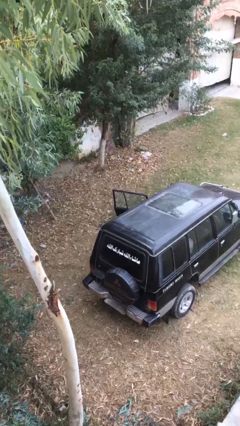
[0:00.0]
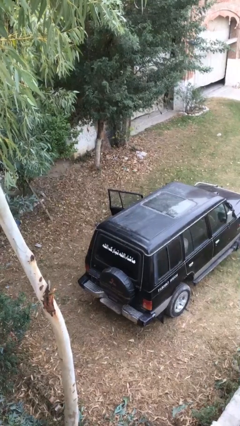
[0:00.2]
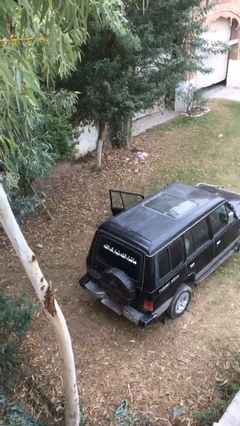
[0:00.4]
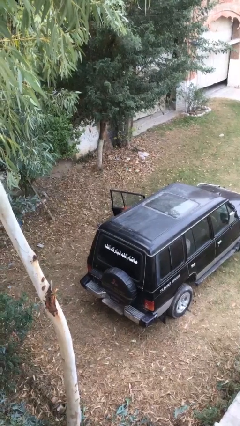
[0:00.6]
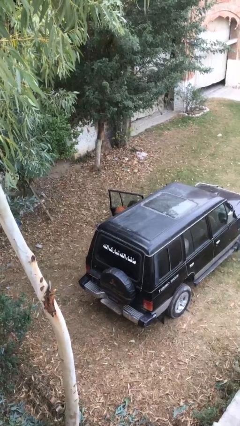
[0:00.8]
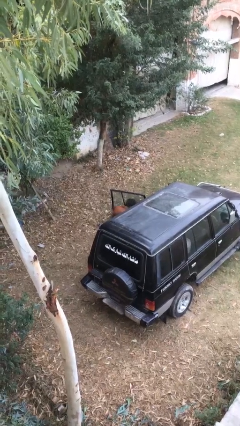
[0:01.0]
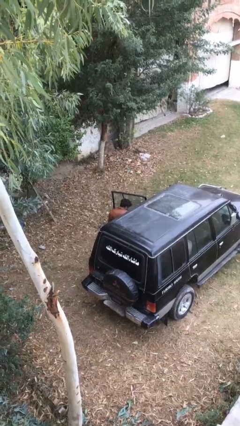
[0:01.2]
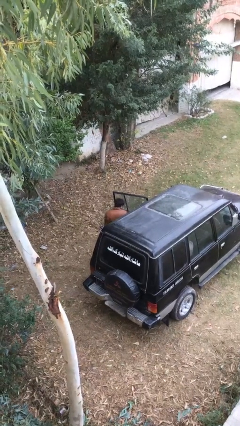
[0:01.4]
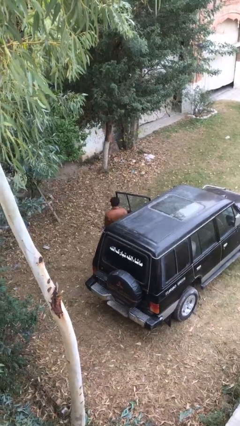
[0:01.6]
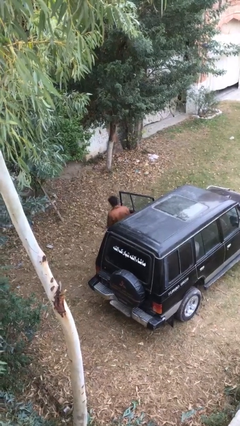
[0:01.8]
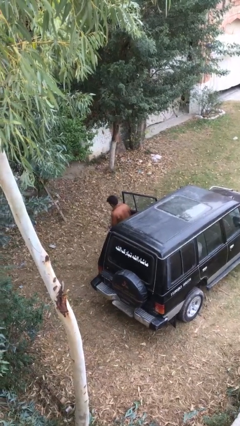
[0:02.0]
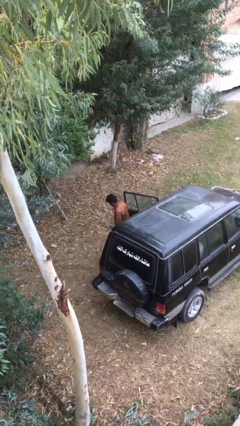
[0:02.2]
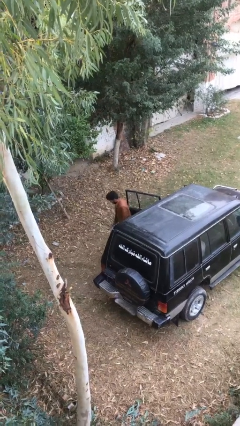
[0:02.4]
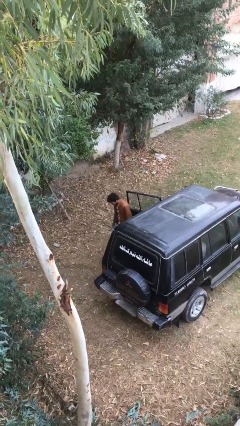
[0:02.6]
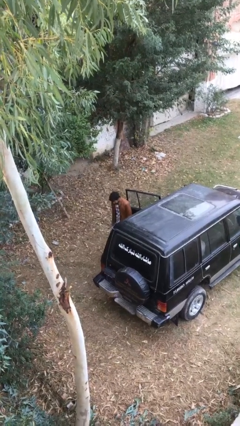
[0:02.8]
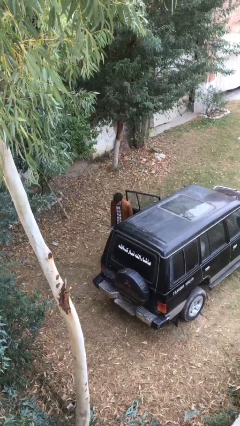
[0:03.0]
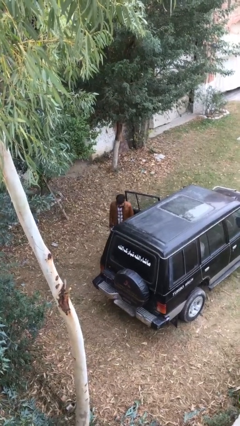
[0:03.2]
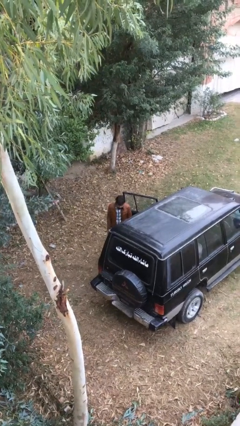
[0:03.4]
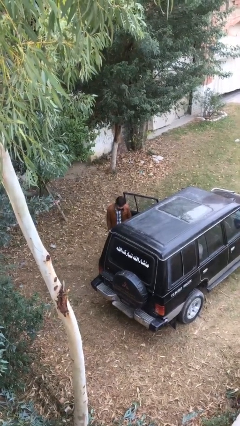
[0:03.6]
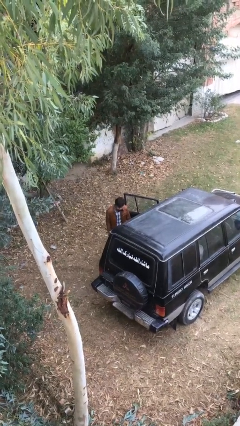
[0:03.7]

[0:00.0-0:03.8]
person exits car

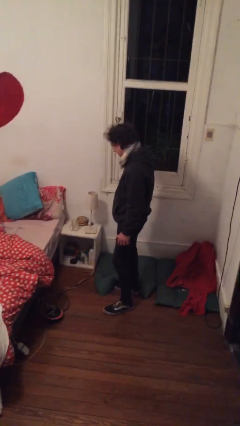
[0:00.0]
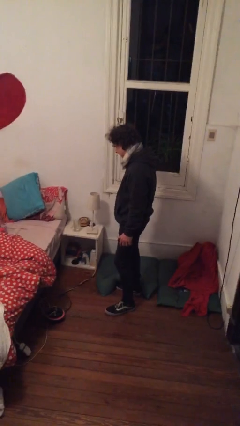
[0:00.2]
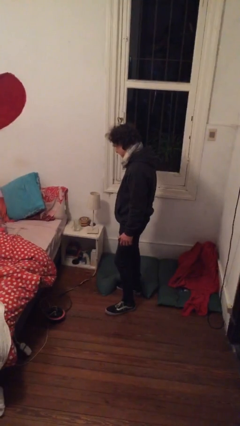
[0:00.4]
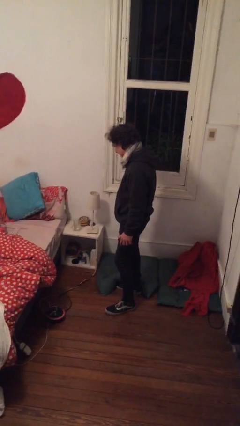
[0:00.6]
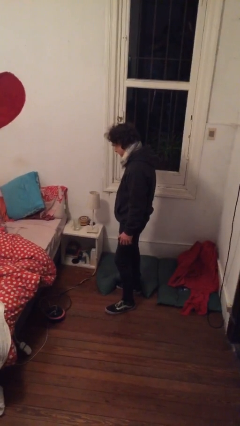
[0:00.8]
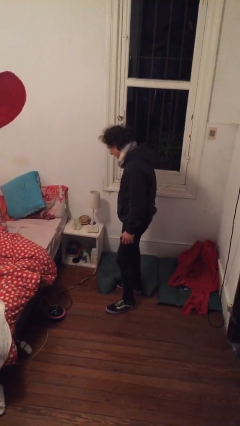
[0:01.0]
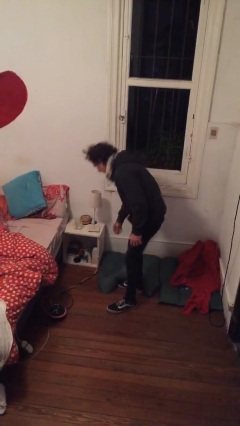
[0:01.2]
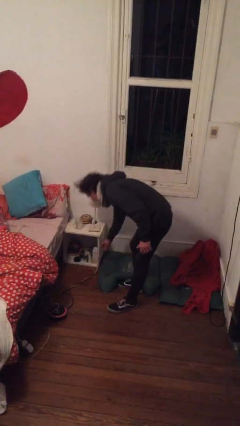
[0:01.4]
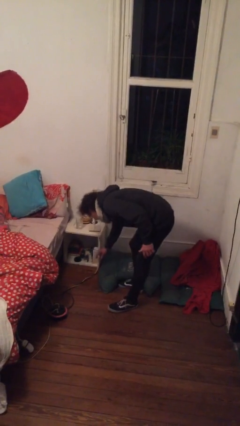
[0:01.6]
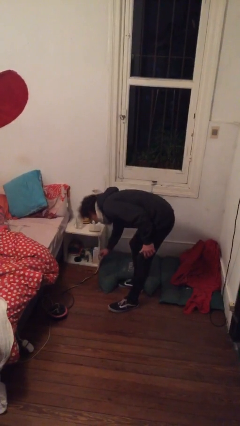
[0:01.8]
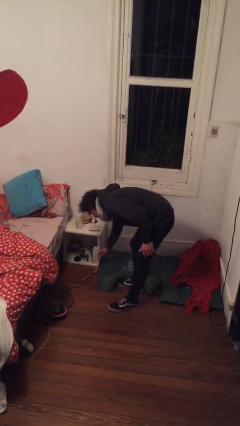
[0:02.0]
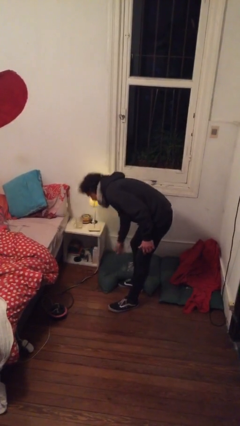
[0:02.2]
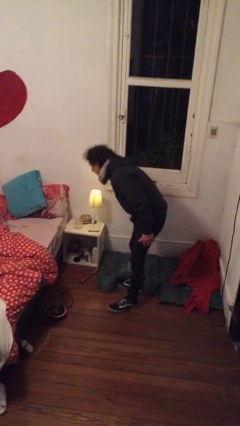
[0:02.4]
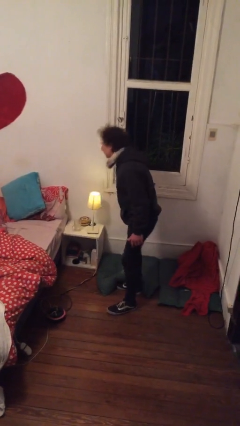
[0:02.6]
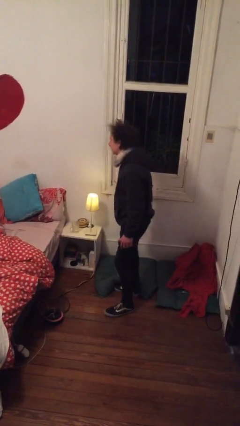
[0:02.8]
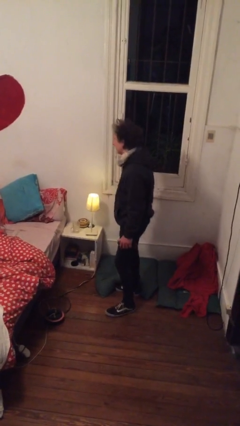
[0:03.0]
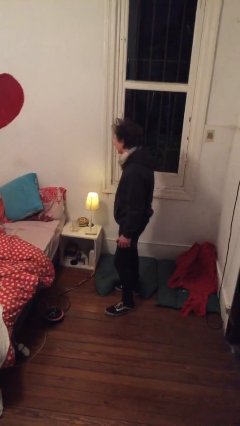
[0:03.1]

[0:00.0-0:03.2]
person turns on lamp

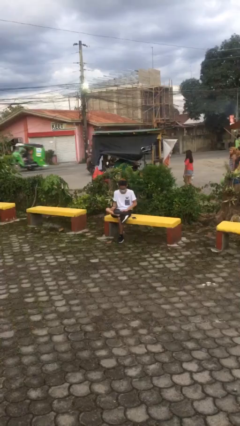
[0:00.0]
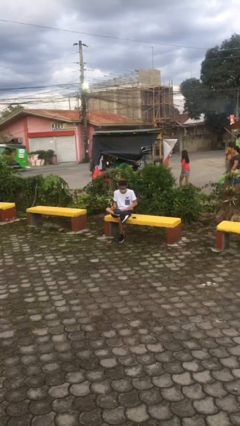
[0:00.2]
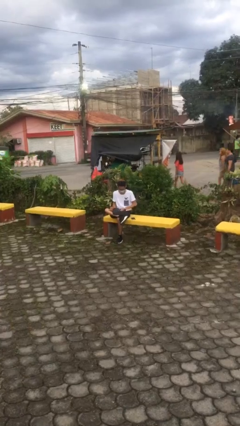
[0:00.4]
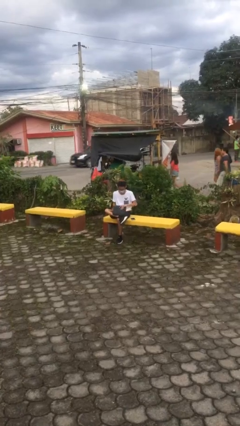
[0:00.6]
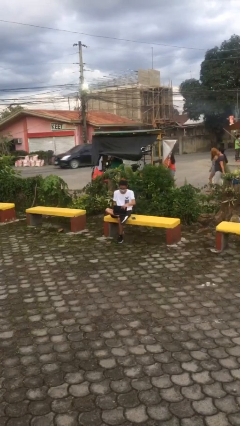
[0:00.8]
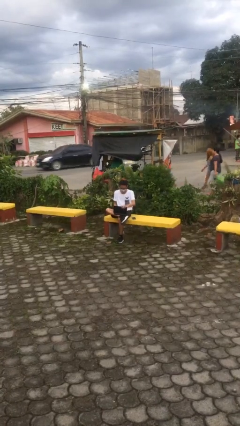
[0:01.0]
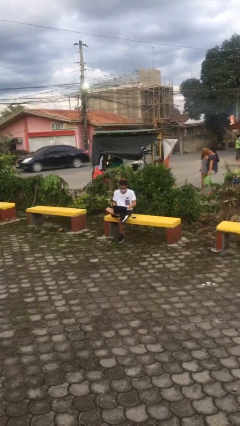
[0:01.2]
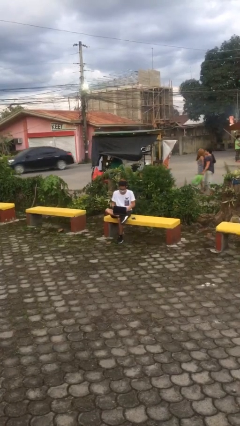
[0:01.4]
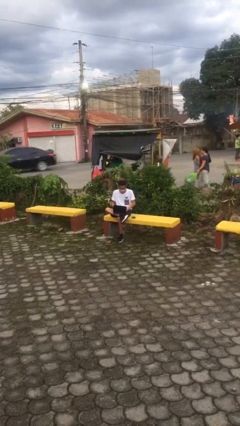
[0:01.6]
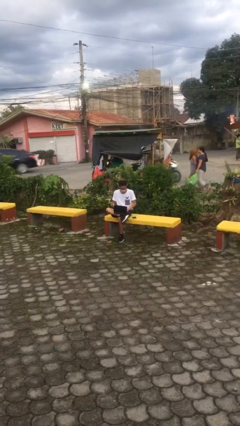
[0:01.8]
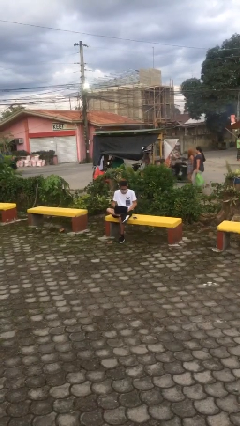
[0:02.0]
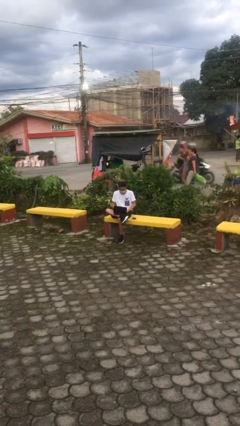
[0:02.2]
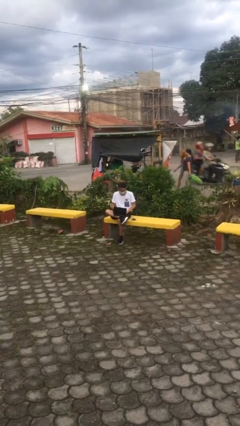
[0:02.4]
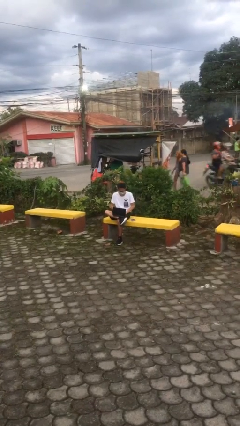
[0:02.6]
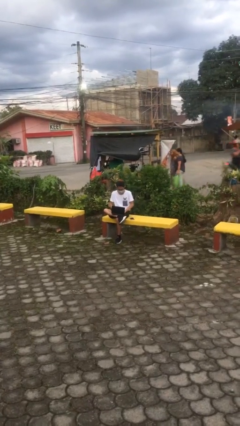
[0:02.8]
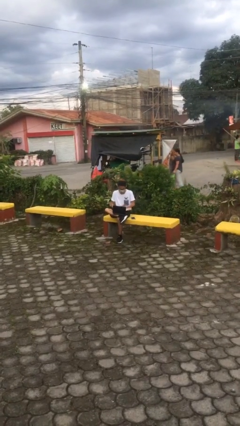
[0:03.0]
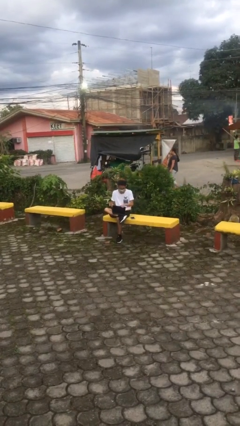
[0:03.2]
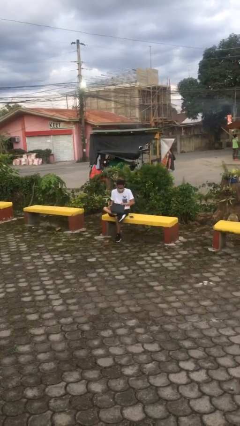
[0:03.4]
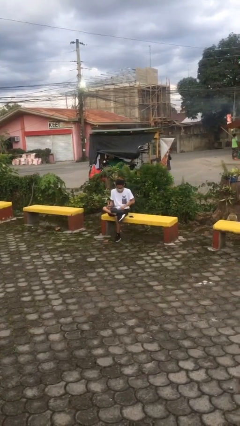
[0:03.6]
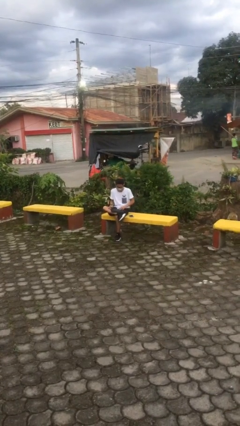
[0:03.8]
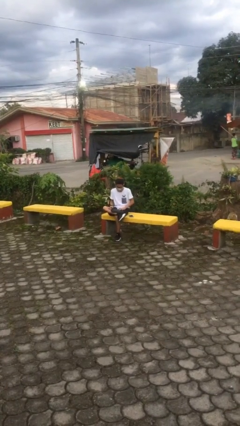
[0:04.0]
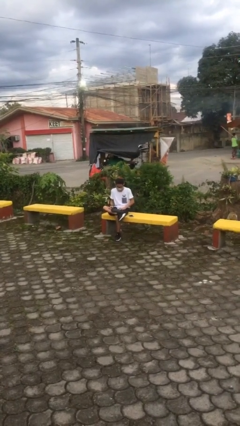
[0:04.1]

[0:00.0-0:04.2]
person interacts with laptop

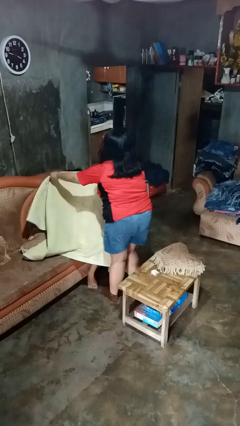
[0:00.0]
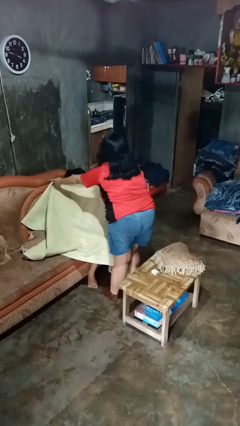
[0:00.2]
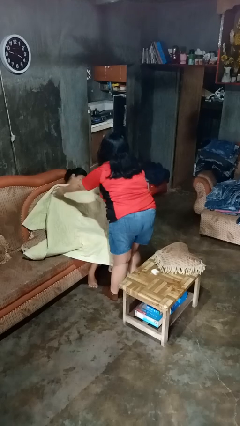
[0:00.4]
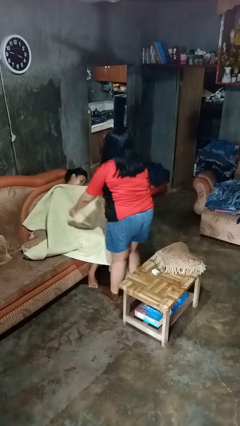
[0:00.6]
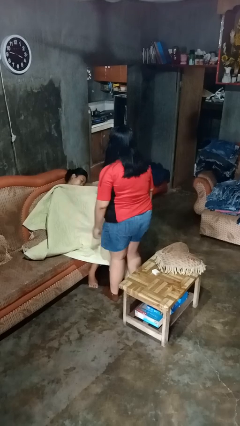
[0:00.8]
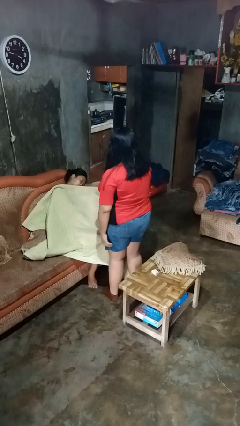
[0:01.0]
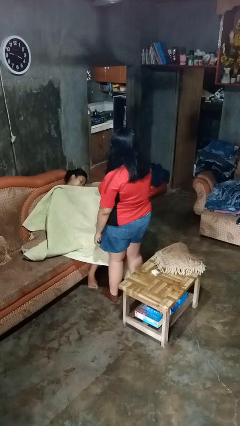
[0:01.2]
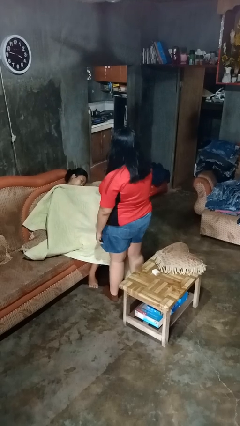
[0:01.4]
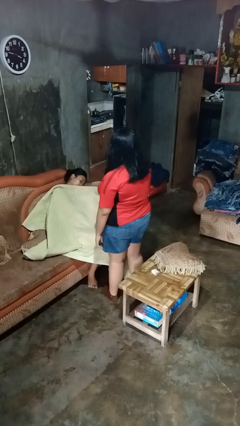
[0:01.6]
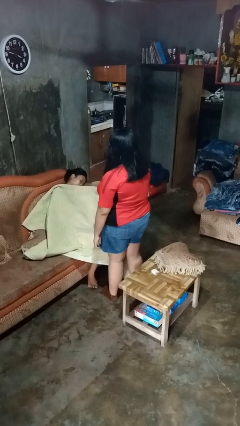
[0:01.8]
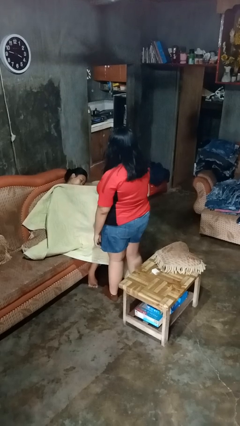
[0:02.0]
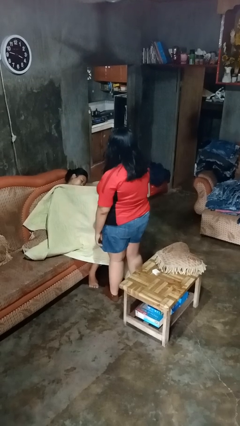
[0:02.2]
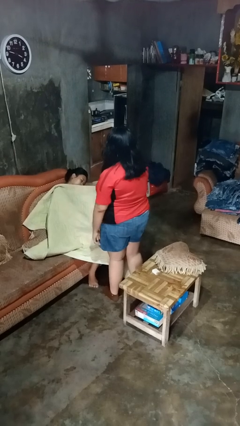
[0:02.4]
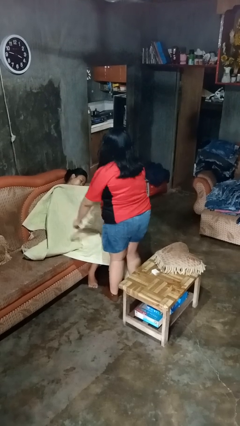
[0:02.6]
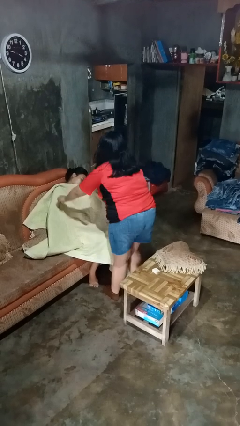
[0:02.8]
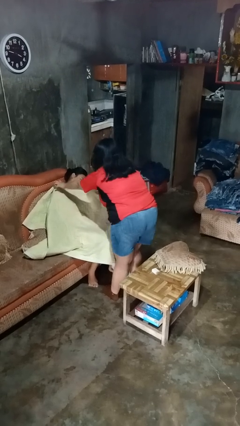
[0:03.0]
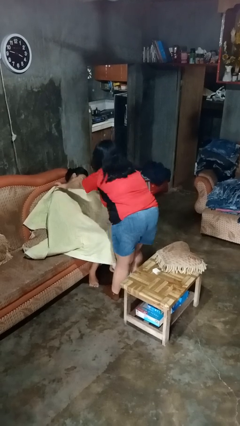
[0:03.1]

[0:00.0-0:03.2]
person covers friend with blanket

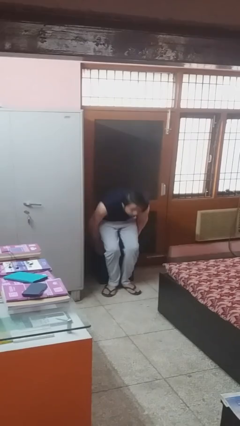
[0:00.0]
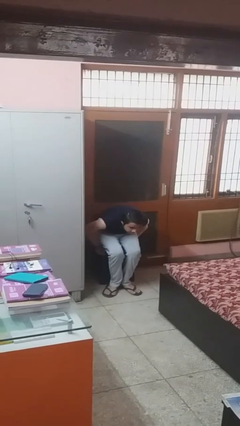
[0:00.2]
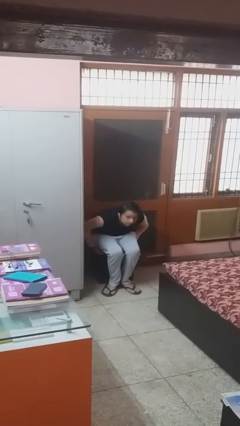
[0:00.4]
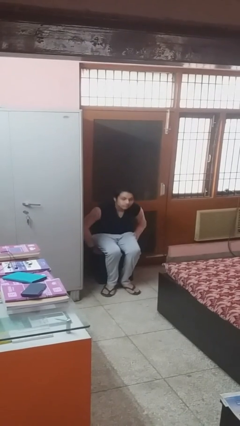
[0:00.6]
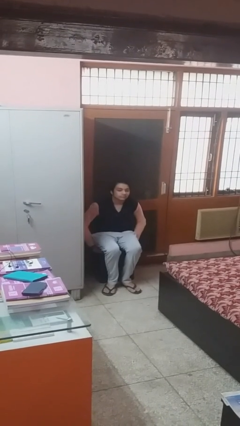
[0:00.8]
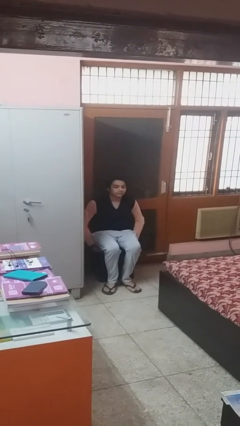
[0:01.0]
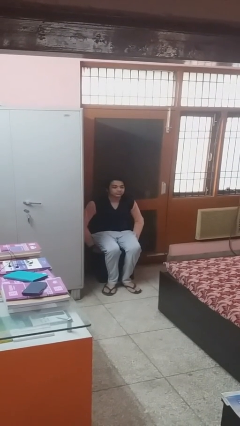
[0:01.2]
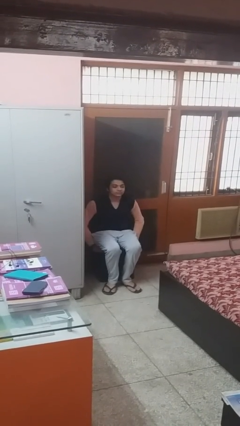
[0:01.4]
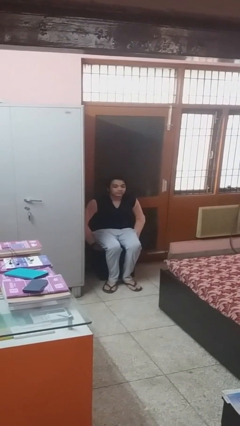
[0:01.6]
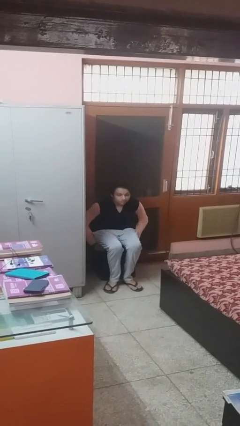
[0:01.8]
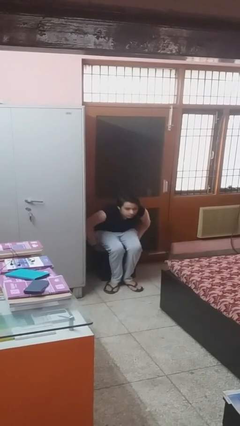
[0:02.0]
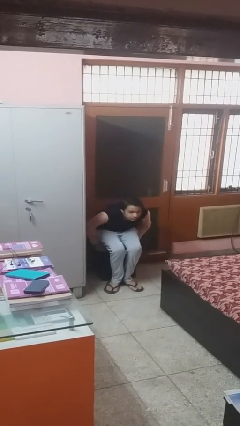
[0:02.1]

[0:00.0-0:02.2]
person sits down

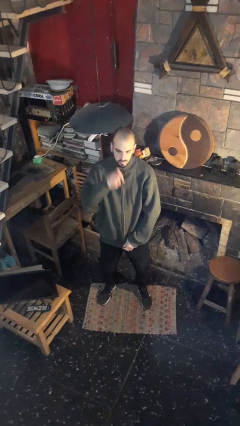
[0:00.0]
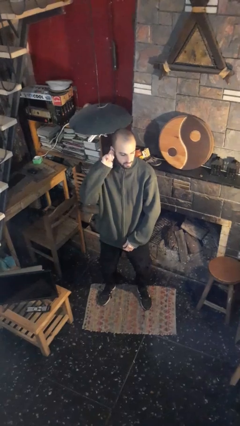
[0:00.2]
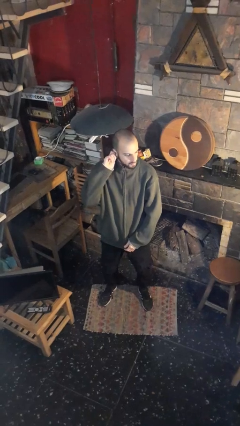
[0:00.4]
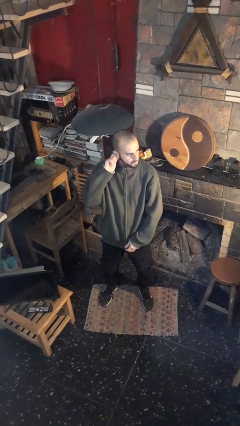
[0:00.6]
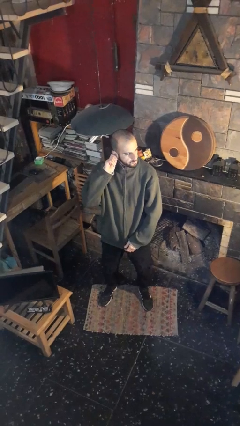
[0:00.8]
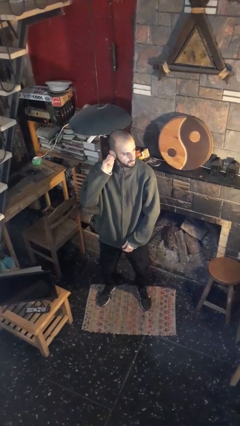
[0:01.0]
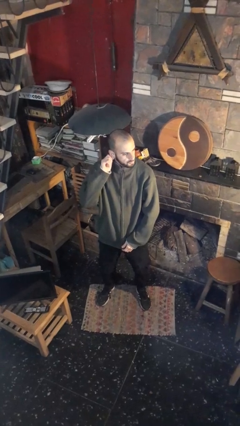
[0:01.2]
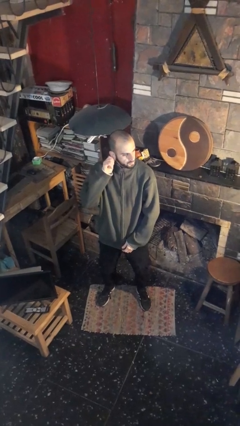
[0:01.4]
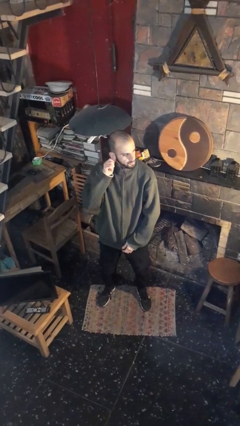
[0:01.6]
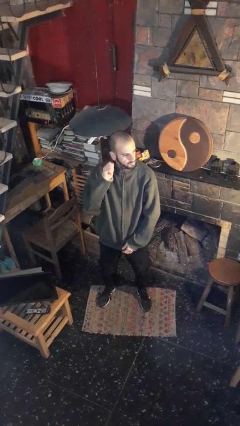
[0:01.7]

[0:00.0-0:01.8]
person touches earlobe
